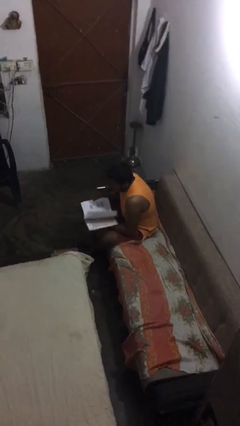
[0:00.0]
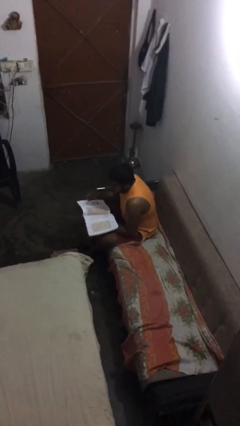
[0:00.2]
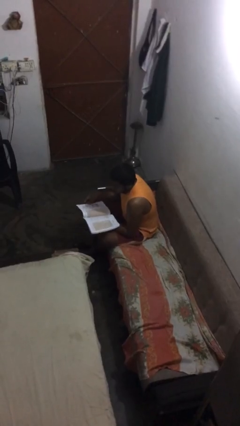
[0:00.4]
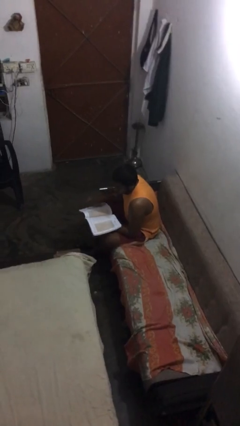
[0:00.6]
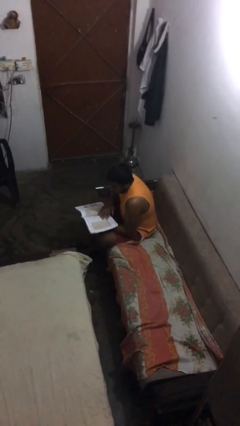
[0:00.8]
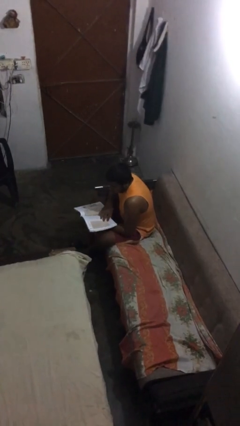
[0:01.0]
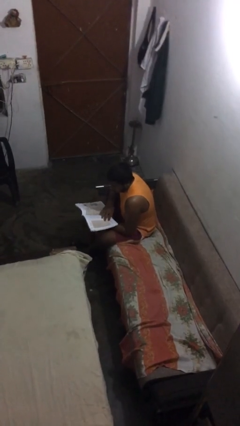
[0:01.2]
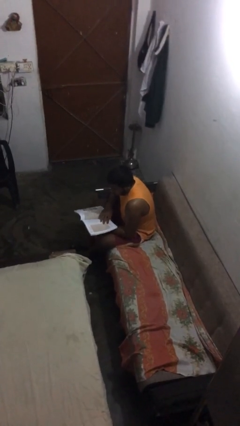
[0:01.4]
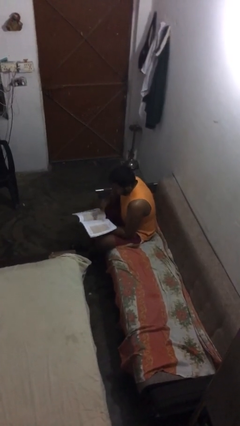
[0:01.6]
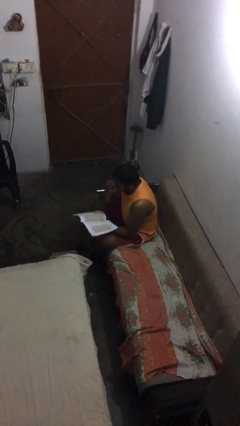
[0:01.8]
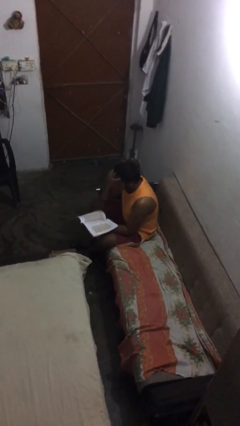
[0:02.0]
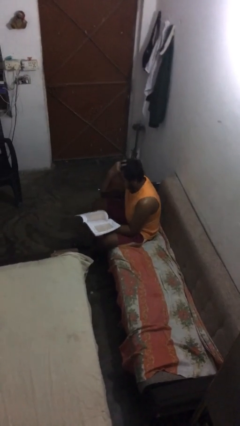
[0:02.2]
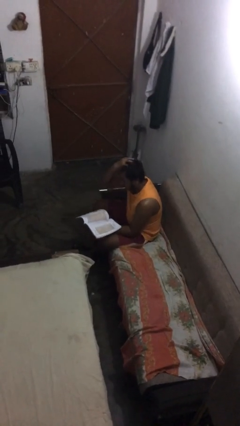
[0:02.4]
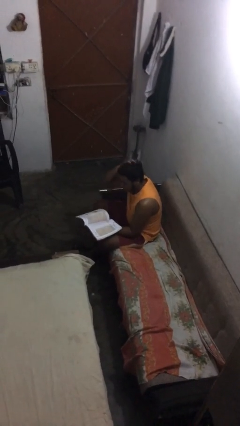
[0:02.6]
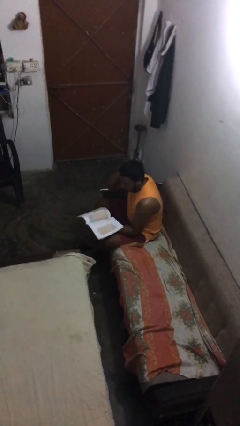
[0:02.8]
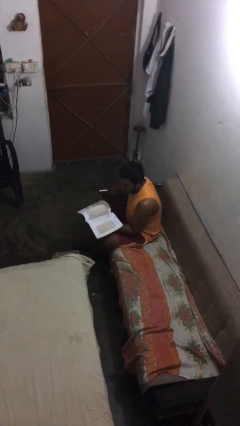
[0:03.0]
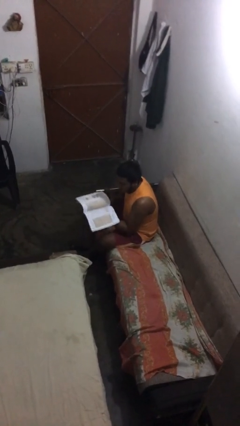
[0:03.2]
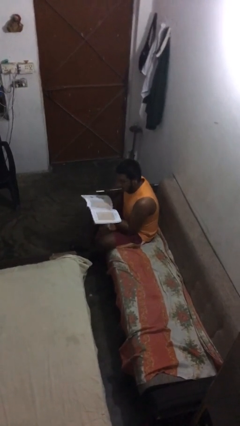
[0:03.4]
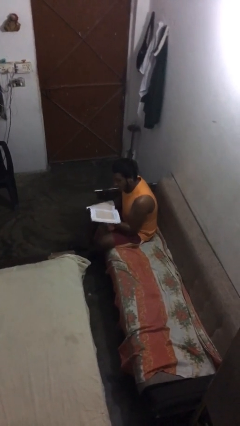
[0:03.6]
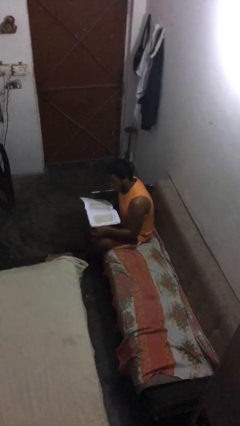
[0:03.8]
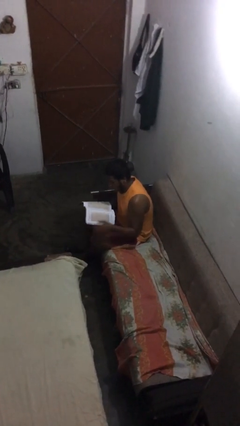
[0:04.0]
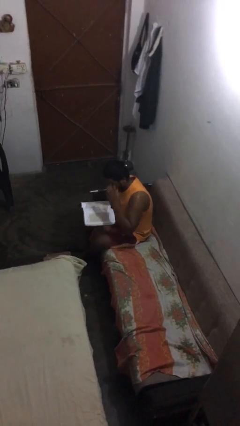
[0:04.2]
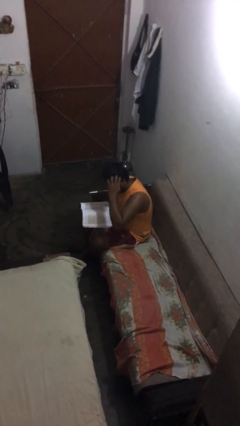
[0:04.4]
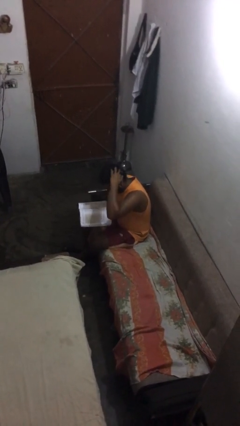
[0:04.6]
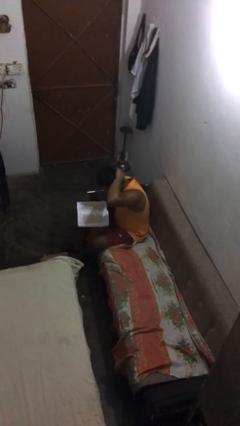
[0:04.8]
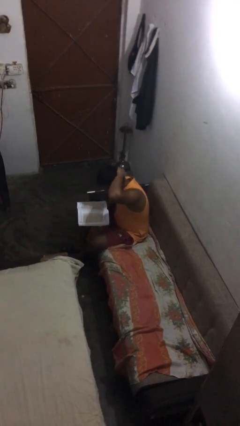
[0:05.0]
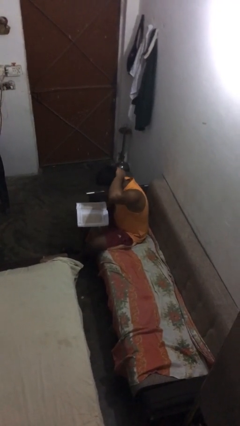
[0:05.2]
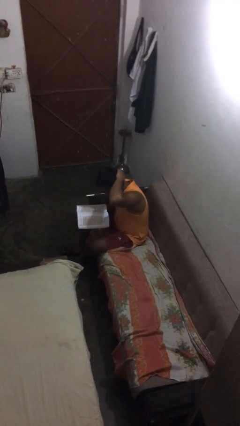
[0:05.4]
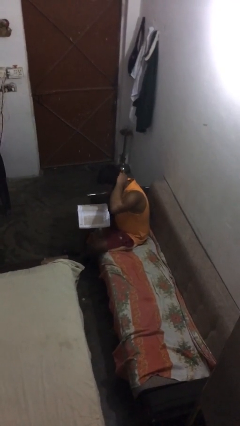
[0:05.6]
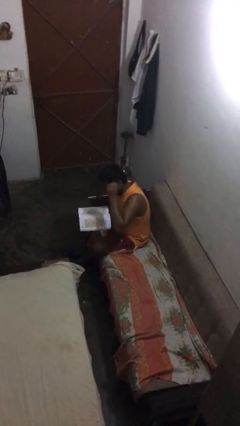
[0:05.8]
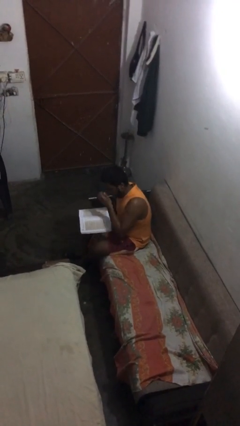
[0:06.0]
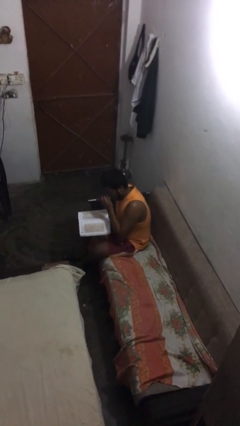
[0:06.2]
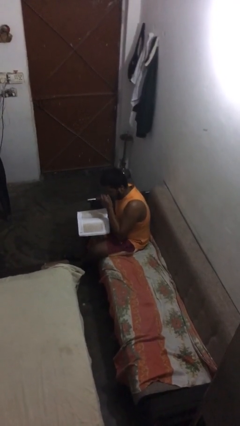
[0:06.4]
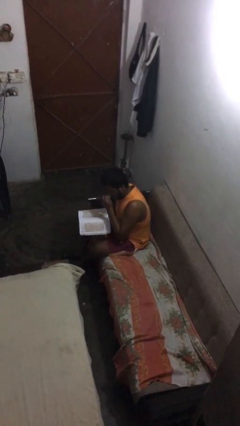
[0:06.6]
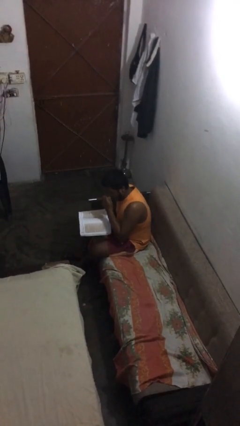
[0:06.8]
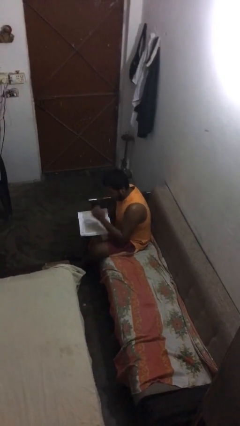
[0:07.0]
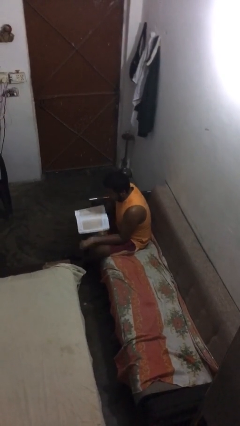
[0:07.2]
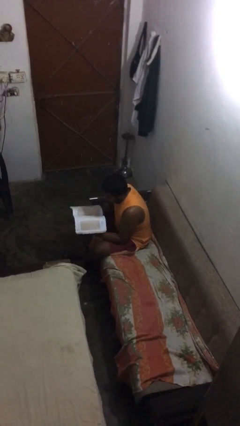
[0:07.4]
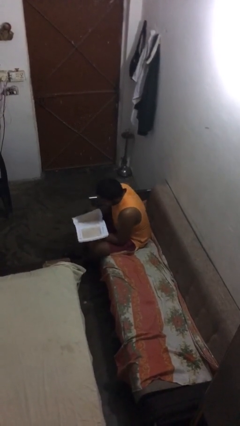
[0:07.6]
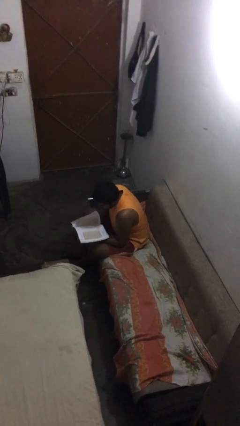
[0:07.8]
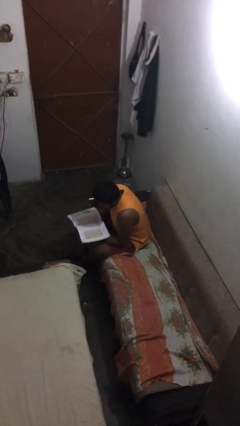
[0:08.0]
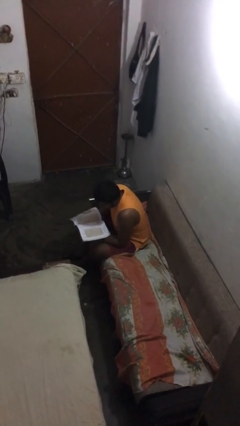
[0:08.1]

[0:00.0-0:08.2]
person reads document

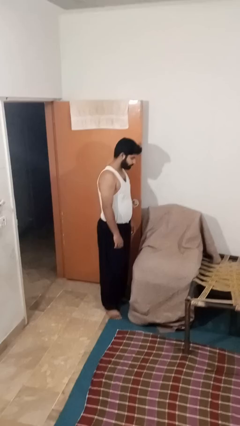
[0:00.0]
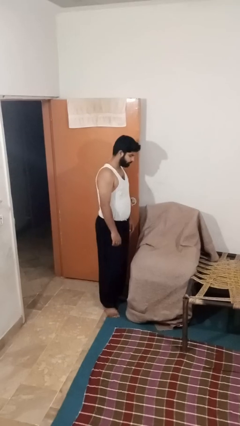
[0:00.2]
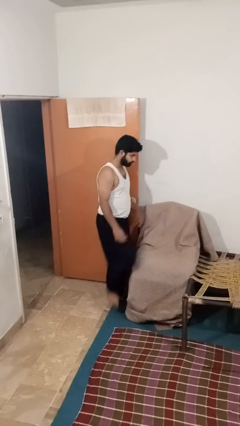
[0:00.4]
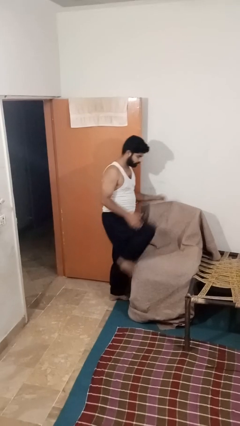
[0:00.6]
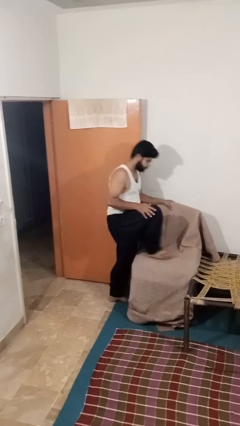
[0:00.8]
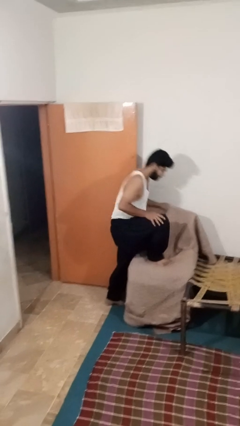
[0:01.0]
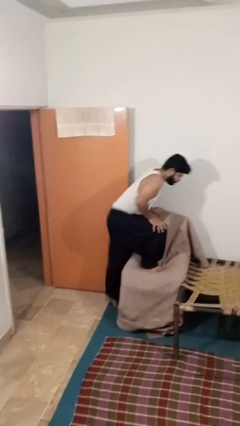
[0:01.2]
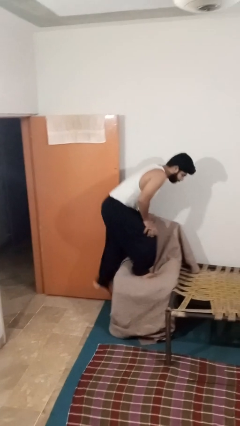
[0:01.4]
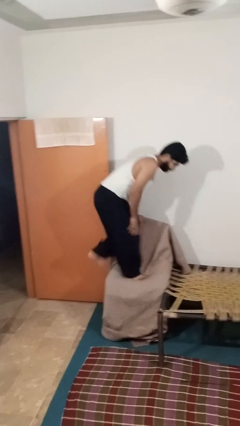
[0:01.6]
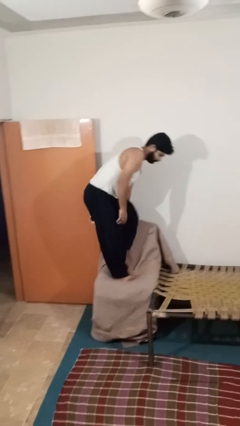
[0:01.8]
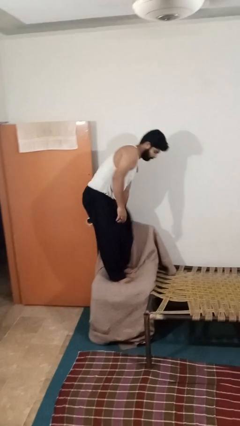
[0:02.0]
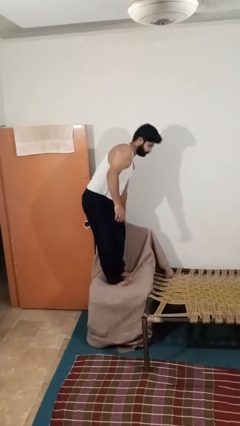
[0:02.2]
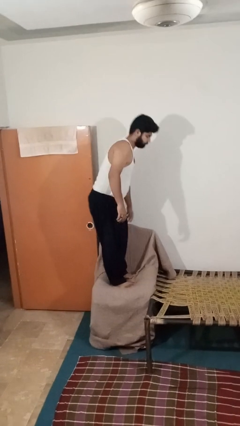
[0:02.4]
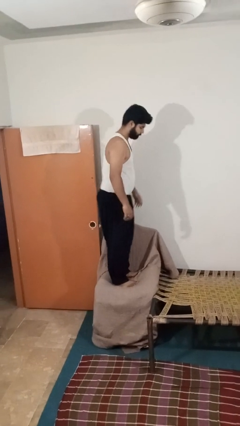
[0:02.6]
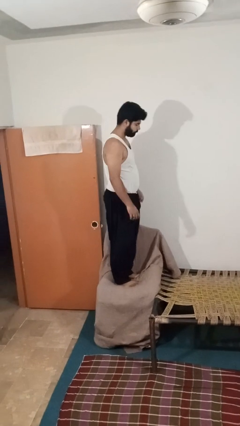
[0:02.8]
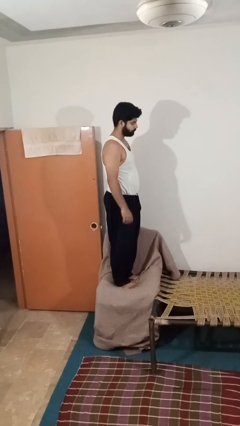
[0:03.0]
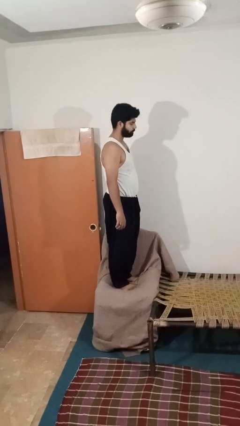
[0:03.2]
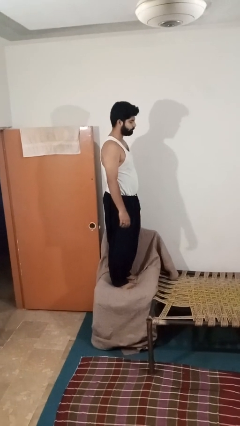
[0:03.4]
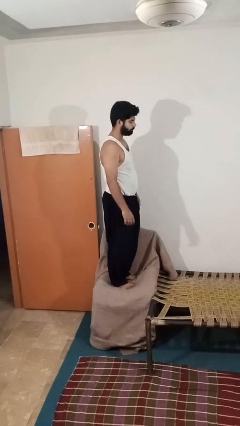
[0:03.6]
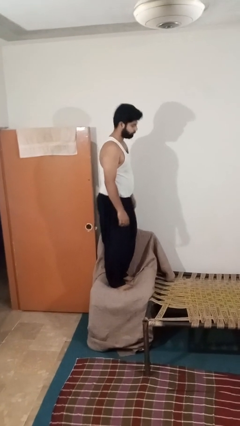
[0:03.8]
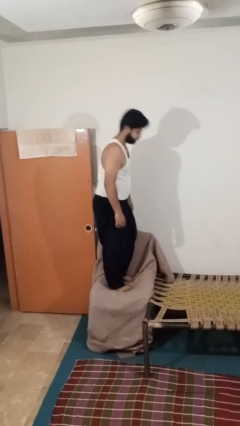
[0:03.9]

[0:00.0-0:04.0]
person climbs on couch

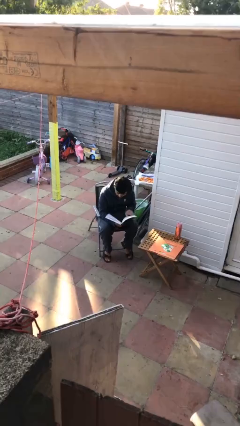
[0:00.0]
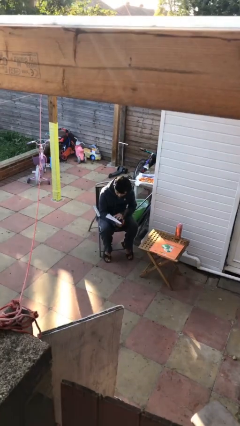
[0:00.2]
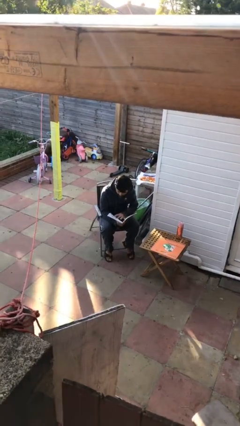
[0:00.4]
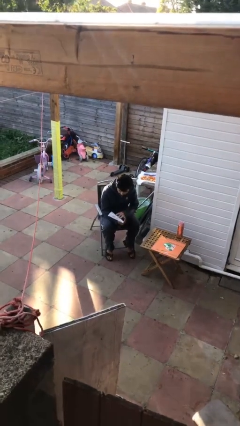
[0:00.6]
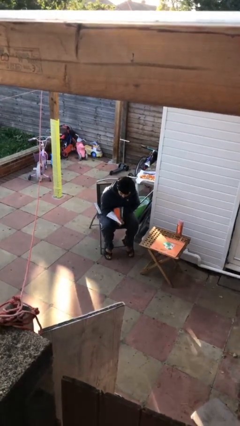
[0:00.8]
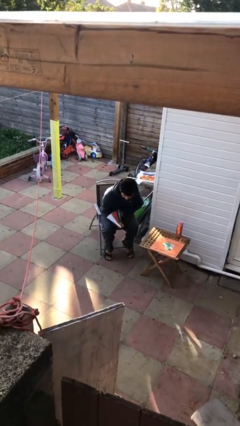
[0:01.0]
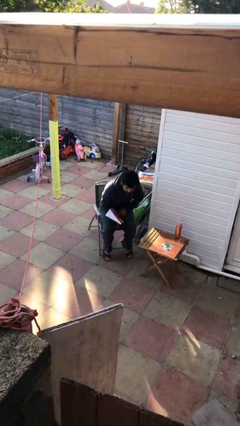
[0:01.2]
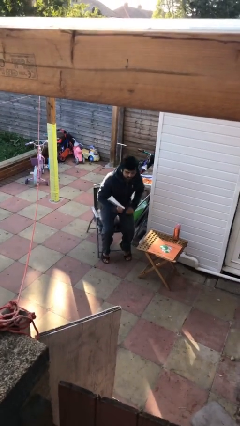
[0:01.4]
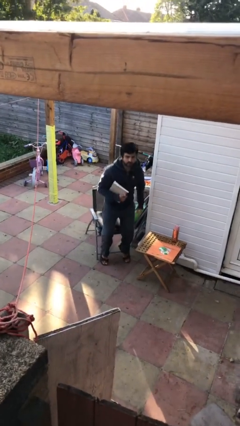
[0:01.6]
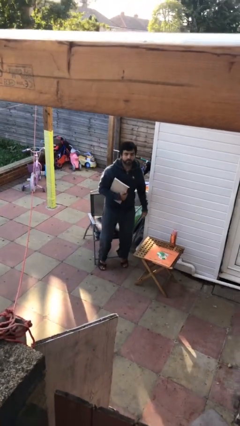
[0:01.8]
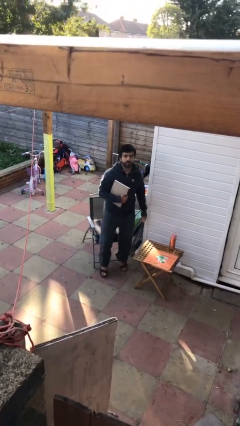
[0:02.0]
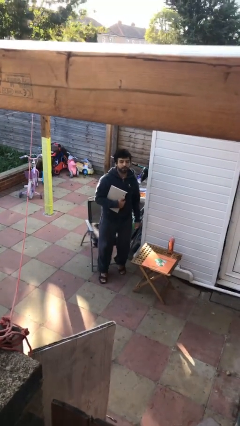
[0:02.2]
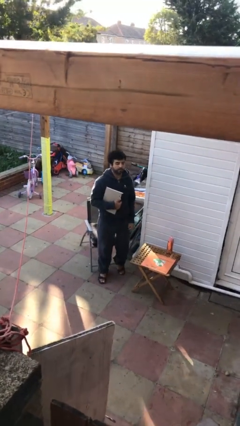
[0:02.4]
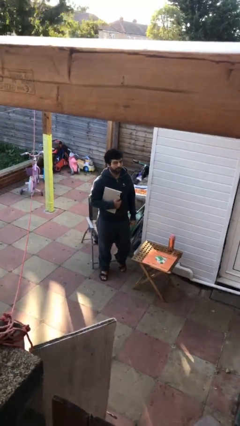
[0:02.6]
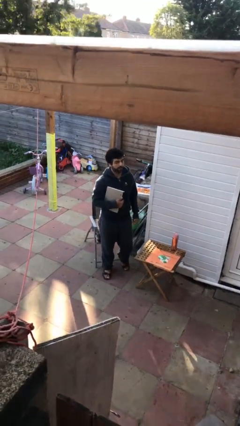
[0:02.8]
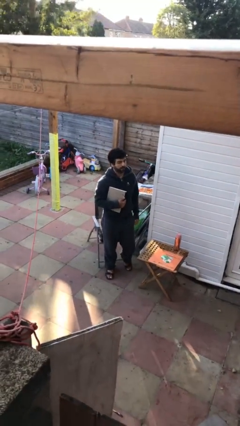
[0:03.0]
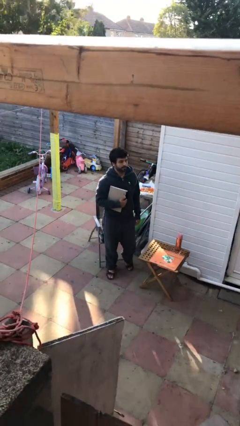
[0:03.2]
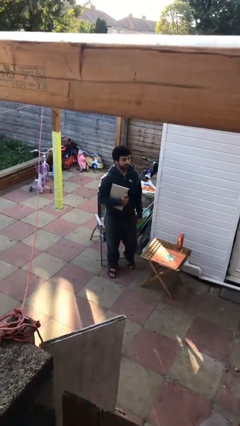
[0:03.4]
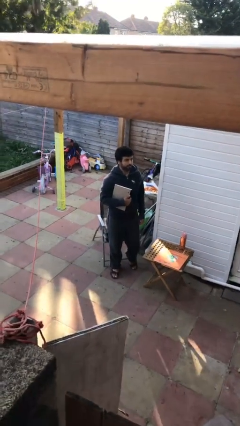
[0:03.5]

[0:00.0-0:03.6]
person stands up

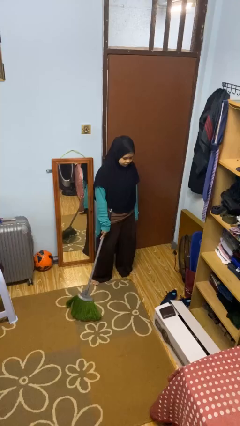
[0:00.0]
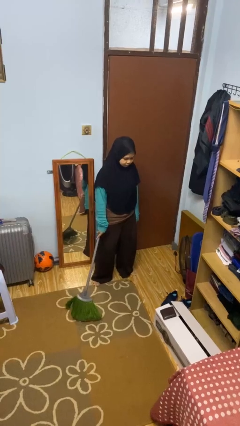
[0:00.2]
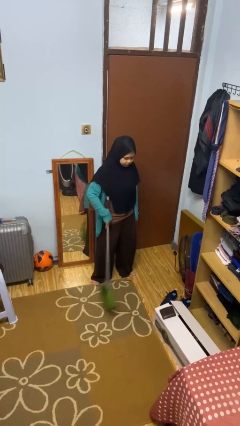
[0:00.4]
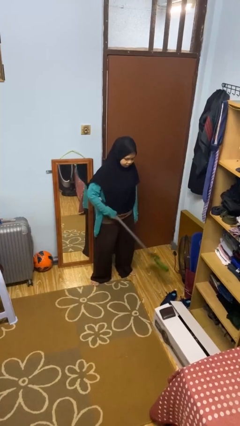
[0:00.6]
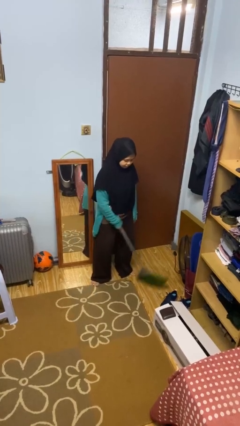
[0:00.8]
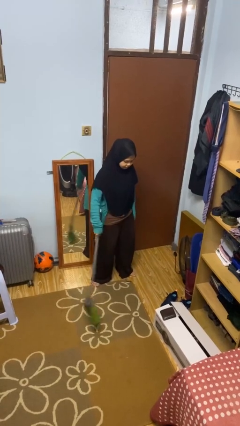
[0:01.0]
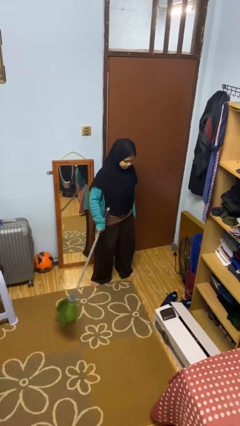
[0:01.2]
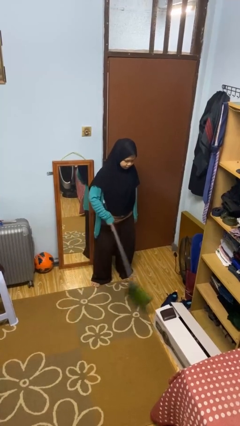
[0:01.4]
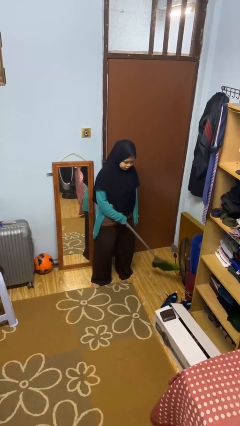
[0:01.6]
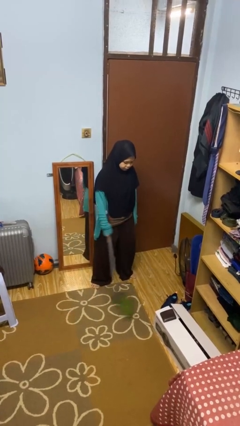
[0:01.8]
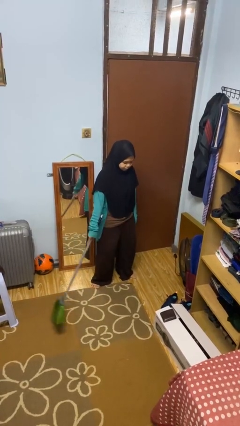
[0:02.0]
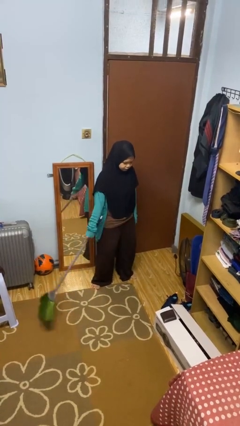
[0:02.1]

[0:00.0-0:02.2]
person sweeps floor

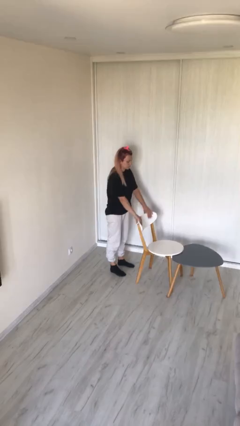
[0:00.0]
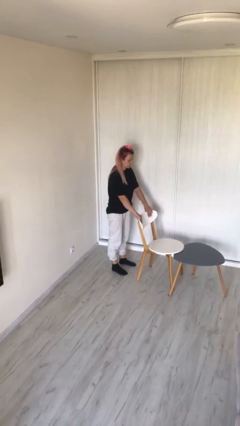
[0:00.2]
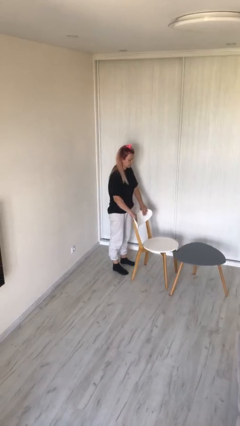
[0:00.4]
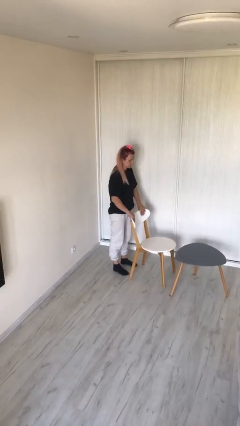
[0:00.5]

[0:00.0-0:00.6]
person pulls out chair
